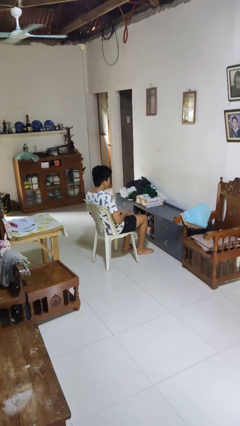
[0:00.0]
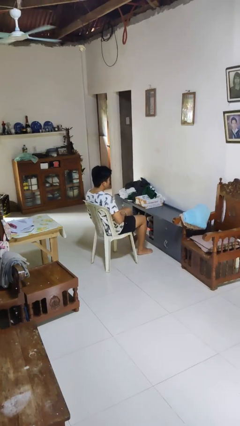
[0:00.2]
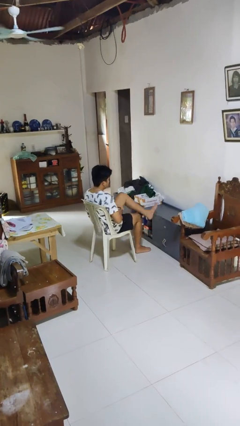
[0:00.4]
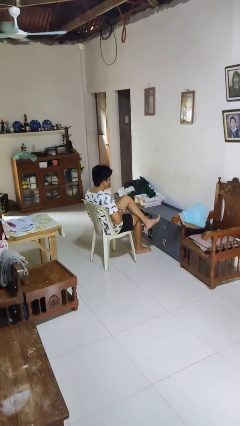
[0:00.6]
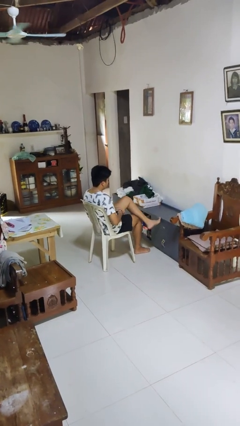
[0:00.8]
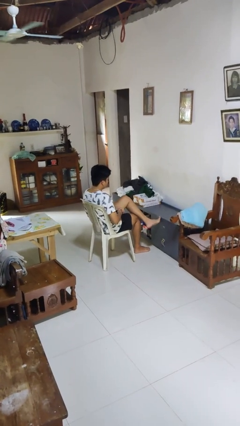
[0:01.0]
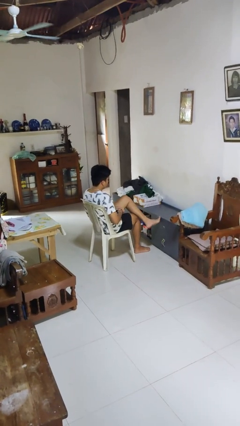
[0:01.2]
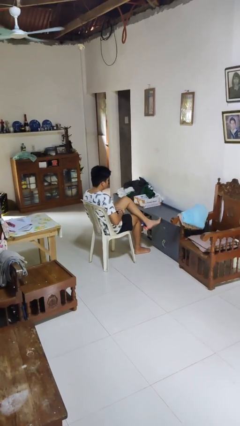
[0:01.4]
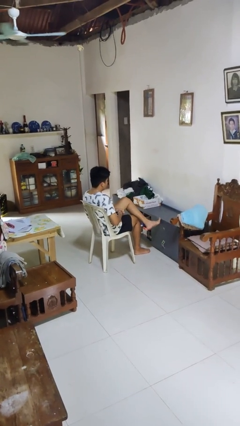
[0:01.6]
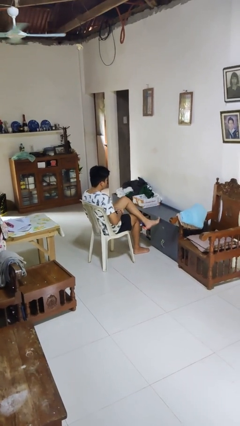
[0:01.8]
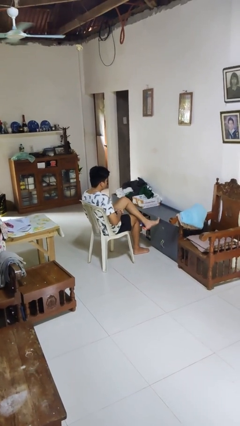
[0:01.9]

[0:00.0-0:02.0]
person crosses legs

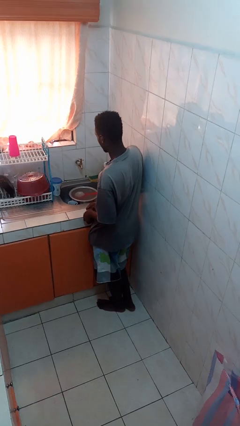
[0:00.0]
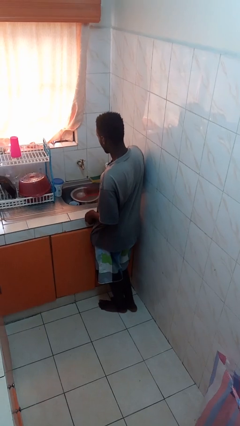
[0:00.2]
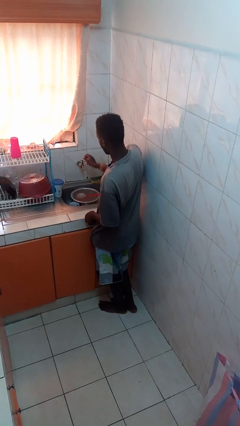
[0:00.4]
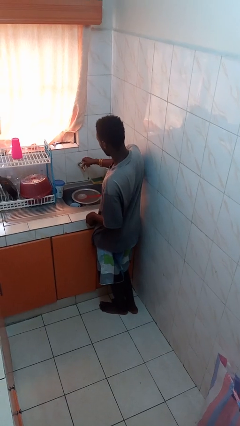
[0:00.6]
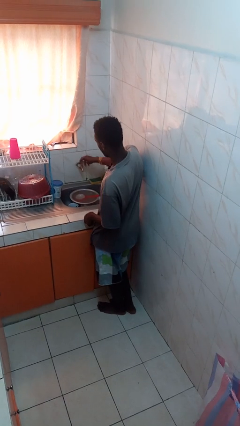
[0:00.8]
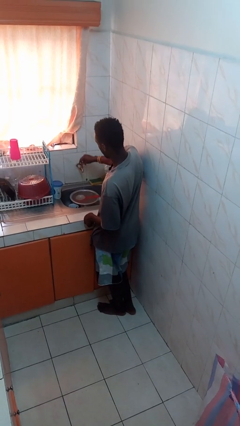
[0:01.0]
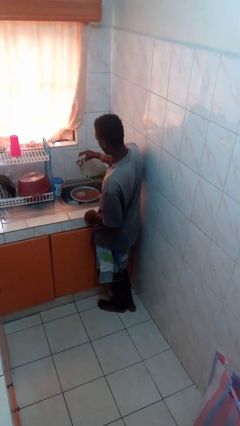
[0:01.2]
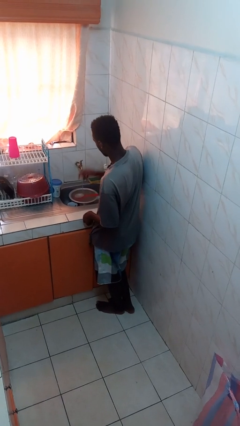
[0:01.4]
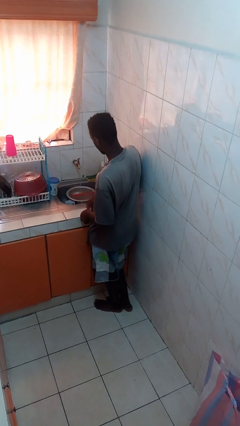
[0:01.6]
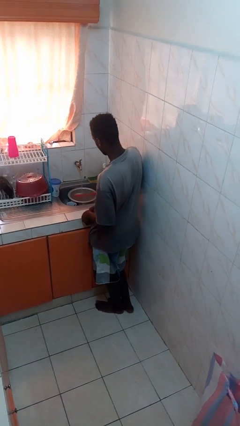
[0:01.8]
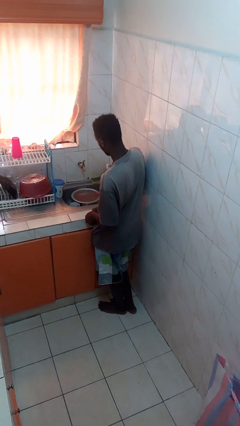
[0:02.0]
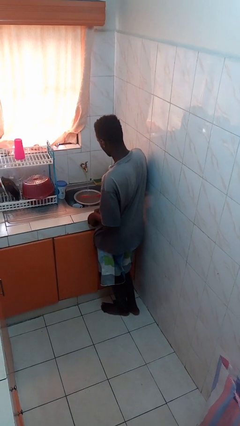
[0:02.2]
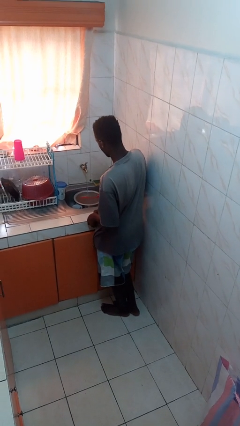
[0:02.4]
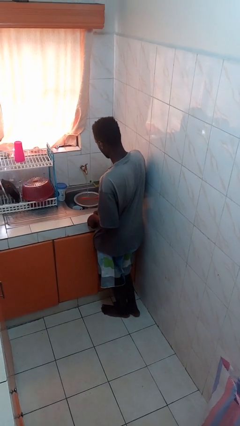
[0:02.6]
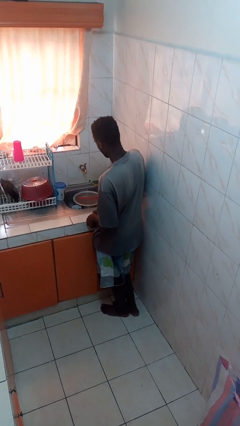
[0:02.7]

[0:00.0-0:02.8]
person turns on faucet

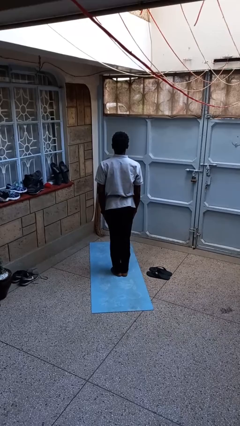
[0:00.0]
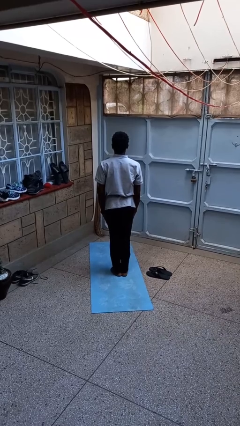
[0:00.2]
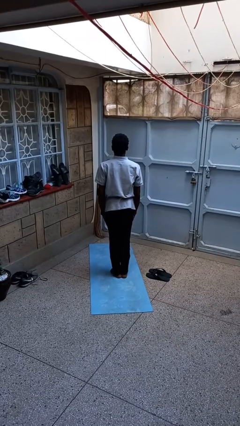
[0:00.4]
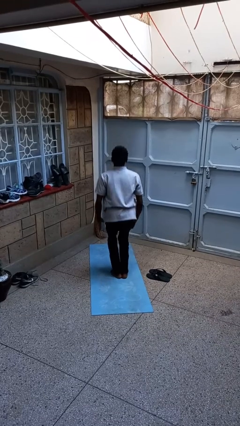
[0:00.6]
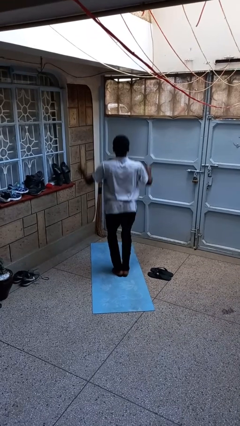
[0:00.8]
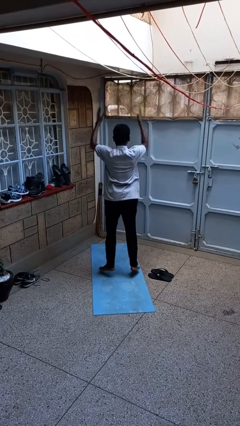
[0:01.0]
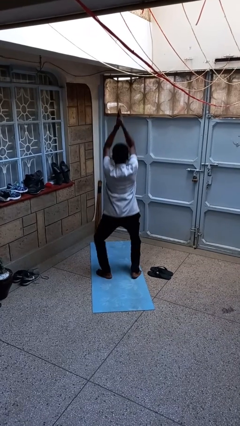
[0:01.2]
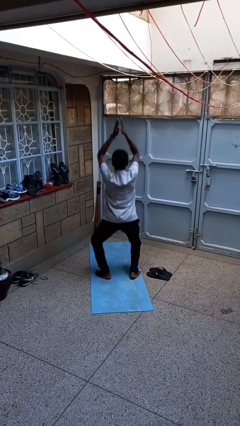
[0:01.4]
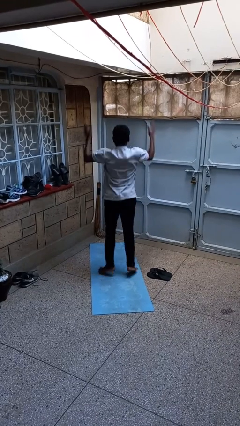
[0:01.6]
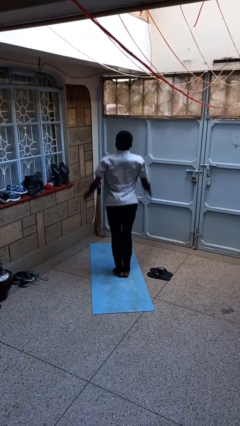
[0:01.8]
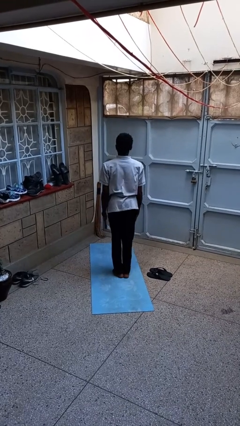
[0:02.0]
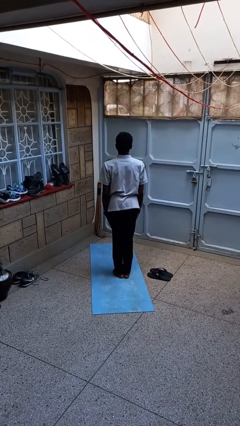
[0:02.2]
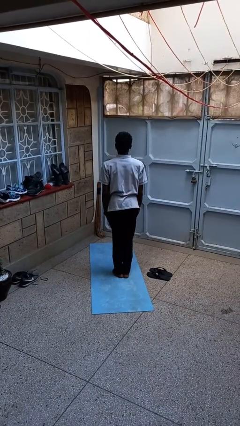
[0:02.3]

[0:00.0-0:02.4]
person exercises with jumping jacks

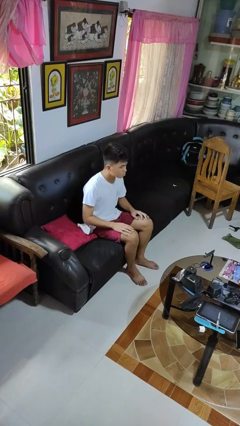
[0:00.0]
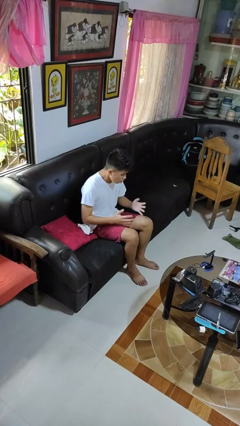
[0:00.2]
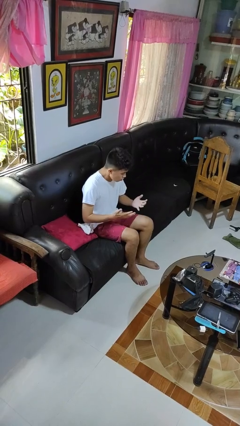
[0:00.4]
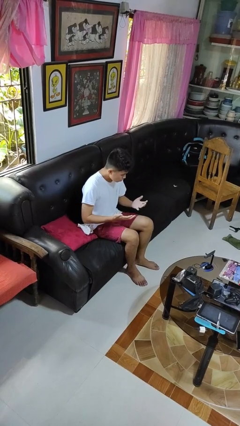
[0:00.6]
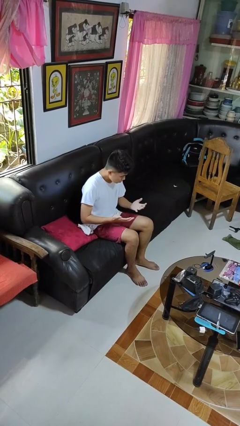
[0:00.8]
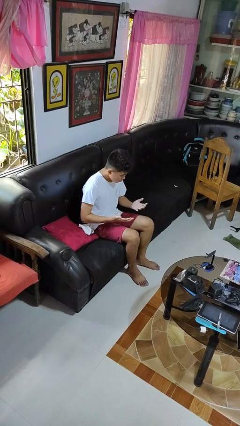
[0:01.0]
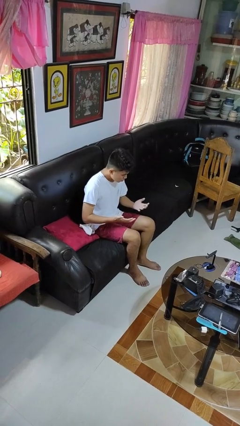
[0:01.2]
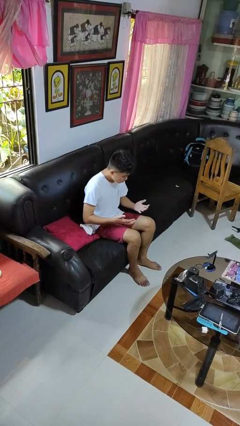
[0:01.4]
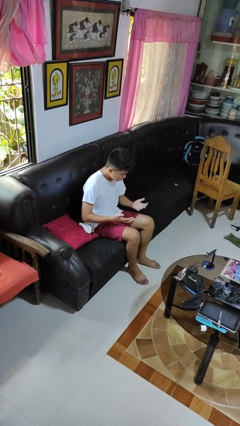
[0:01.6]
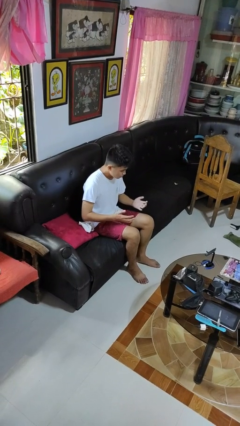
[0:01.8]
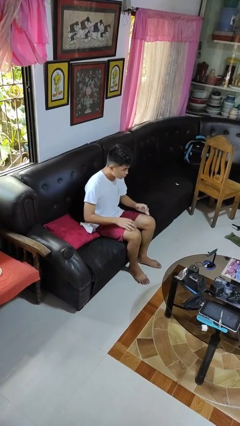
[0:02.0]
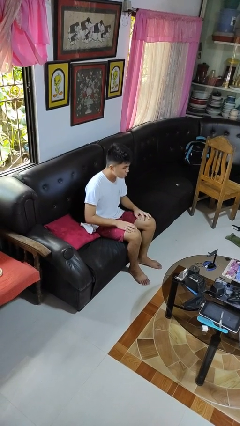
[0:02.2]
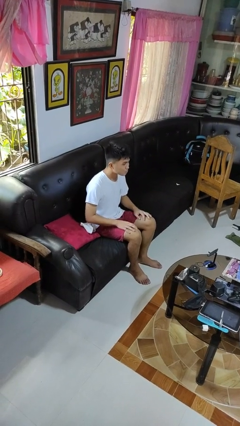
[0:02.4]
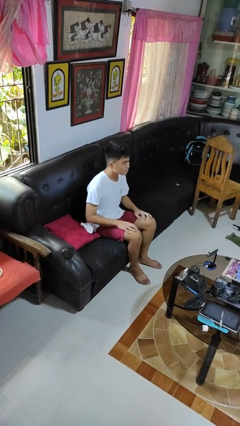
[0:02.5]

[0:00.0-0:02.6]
person looks at hands in lap

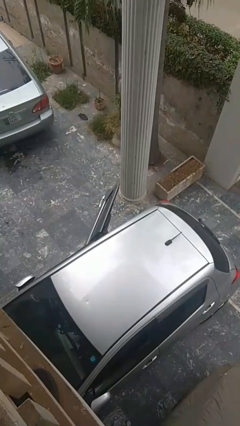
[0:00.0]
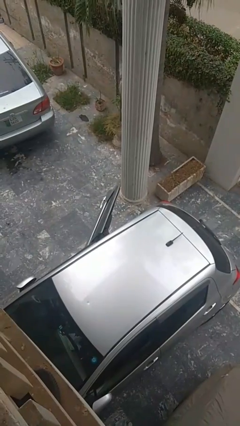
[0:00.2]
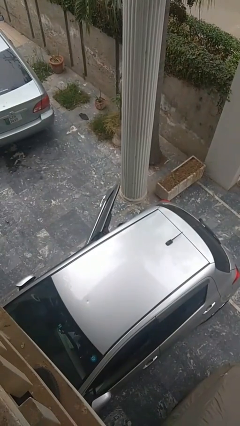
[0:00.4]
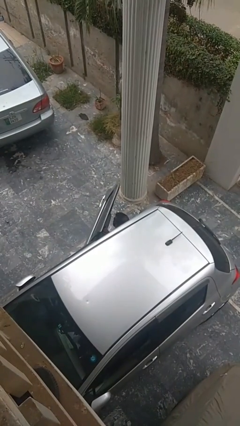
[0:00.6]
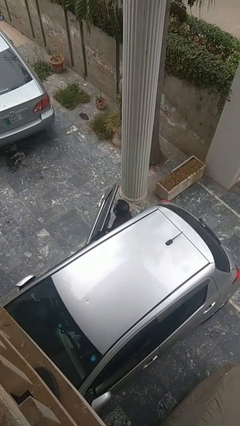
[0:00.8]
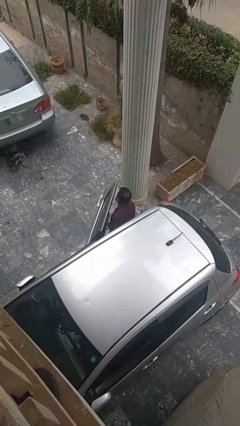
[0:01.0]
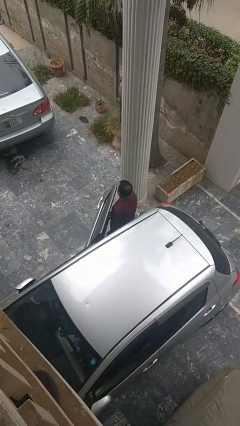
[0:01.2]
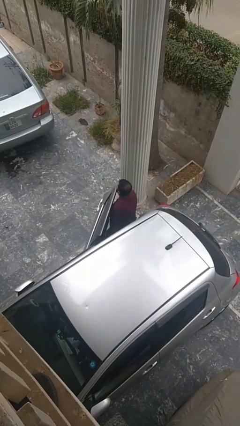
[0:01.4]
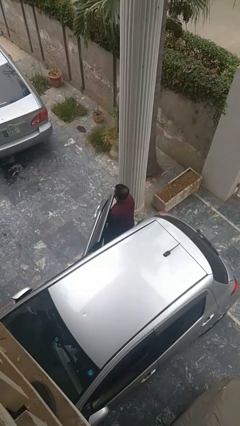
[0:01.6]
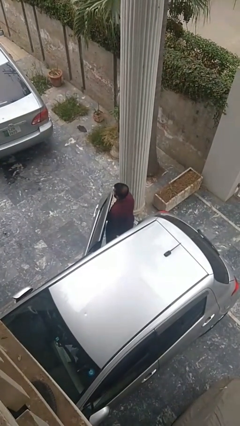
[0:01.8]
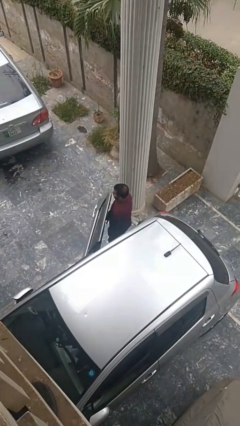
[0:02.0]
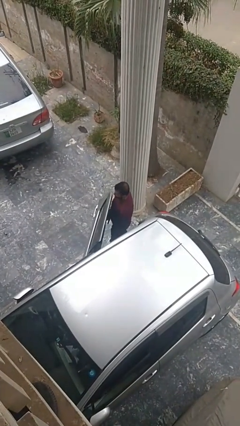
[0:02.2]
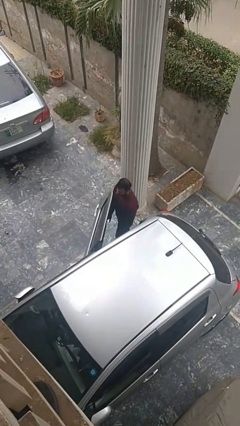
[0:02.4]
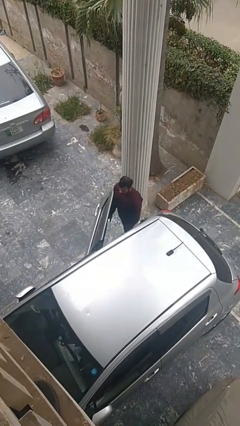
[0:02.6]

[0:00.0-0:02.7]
person exits car

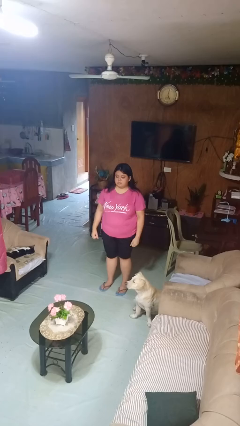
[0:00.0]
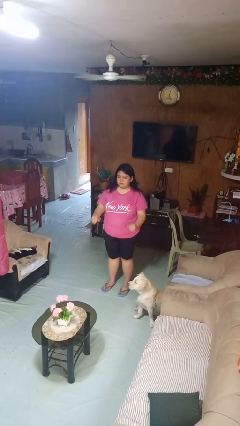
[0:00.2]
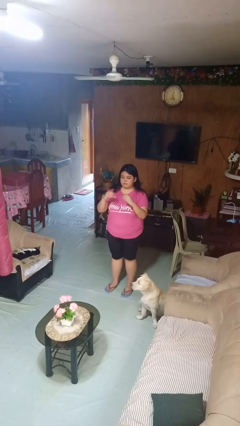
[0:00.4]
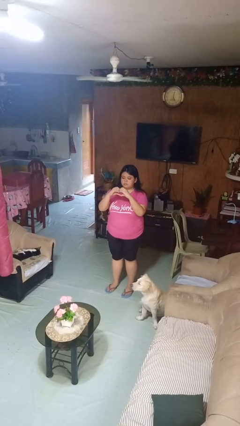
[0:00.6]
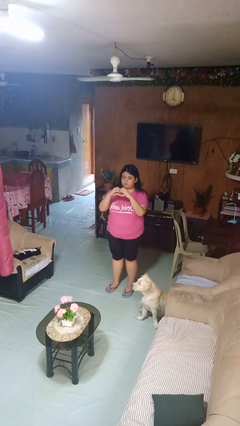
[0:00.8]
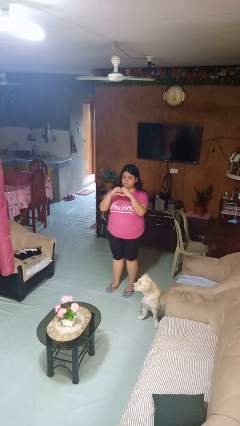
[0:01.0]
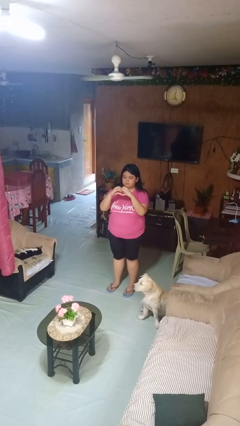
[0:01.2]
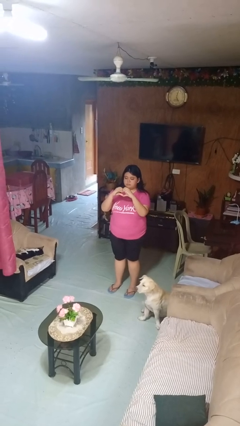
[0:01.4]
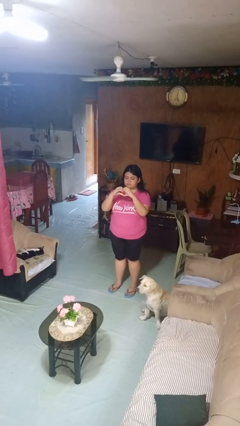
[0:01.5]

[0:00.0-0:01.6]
person gestures heart

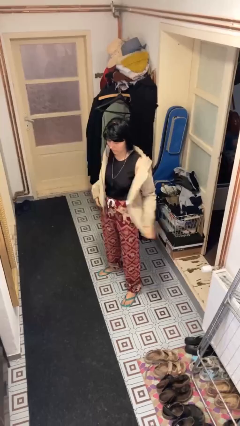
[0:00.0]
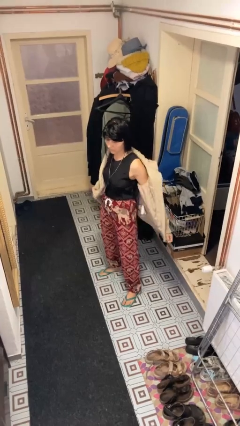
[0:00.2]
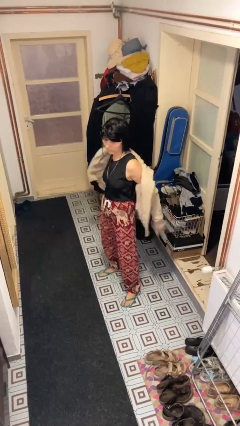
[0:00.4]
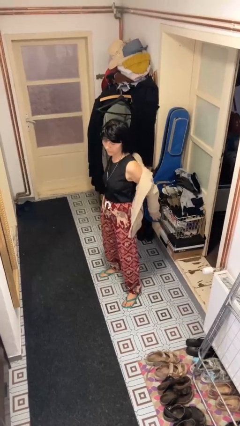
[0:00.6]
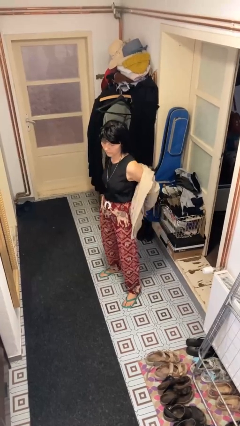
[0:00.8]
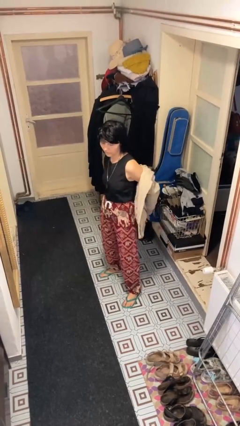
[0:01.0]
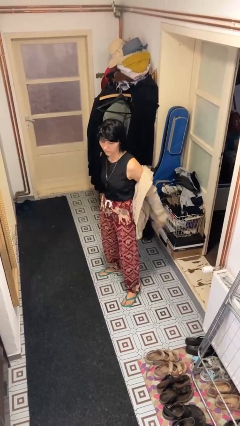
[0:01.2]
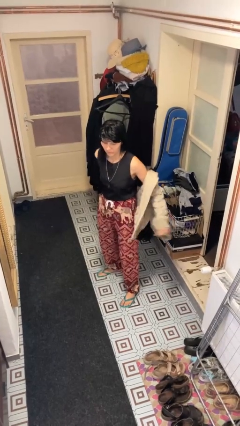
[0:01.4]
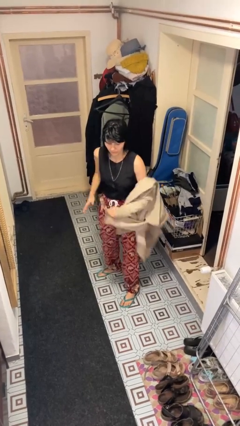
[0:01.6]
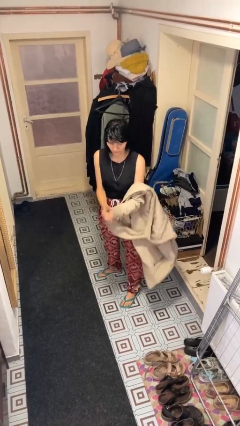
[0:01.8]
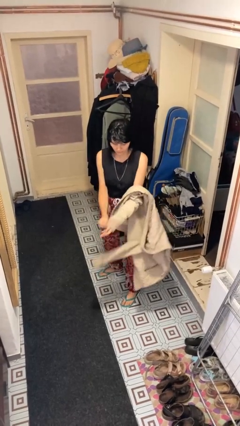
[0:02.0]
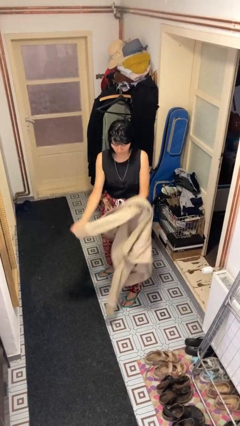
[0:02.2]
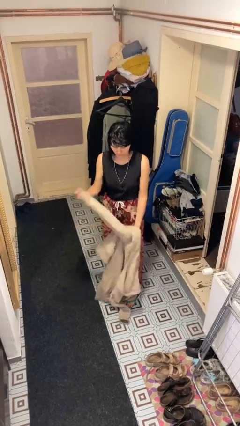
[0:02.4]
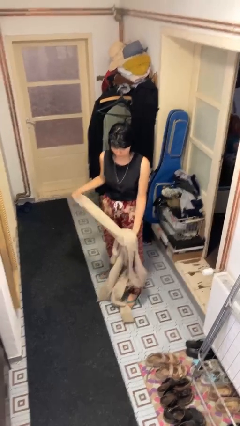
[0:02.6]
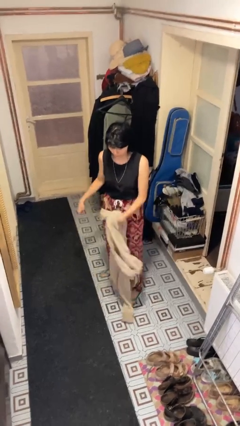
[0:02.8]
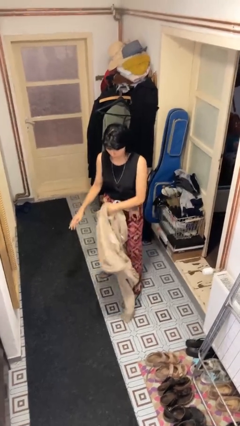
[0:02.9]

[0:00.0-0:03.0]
person takes off jacket

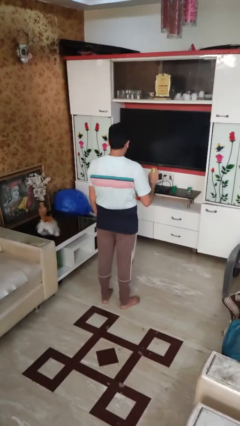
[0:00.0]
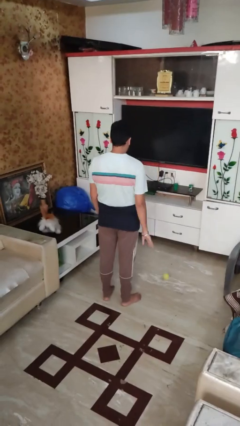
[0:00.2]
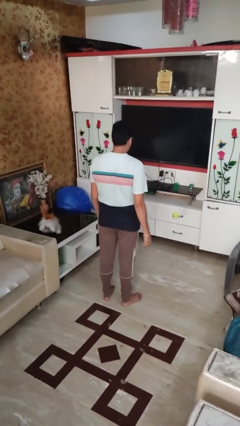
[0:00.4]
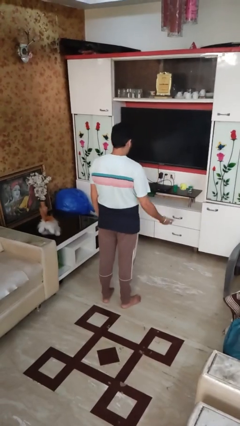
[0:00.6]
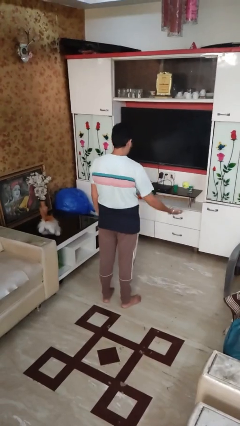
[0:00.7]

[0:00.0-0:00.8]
person bounces ball on floor
